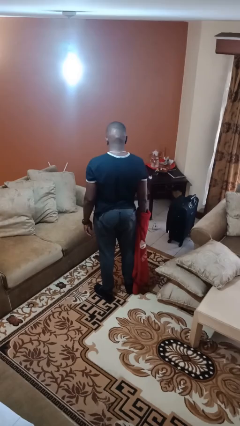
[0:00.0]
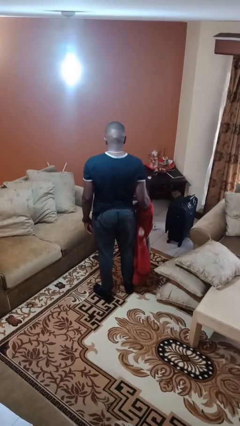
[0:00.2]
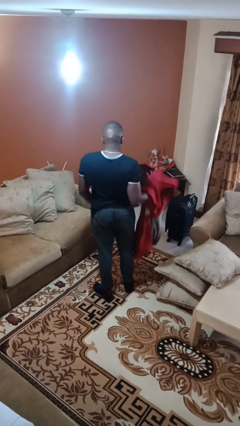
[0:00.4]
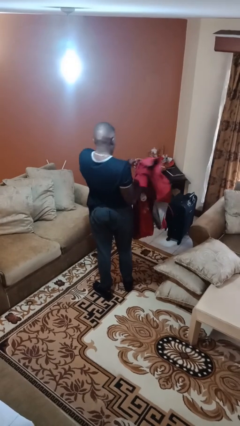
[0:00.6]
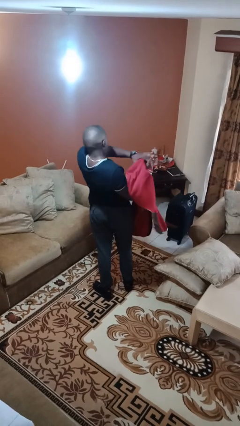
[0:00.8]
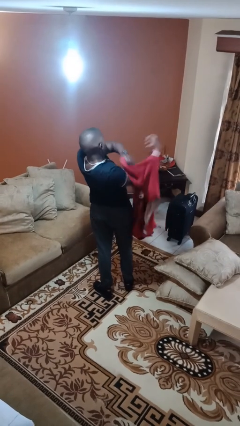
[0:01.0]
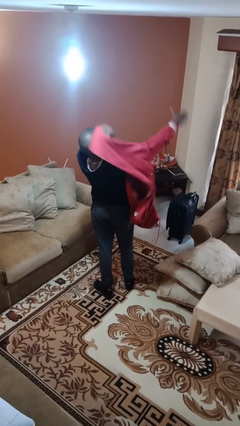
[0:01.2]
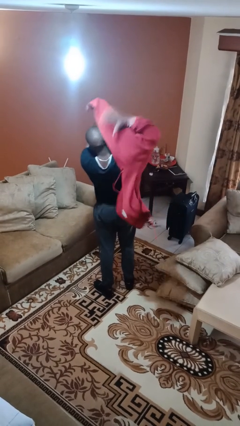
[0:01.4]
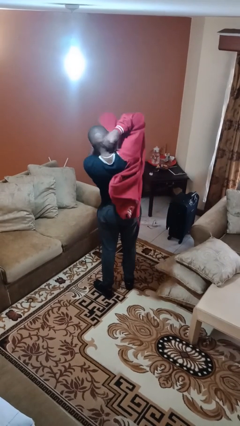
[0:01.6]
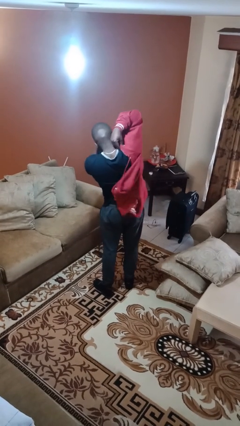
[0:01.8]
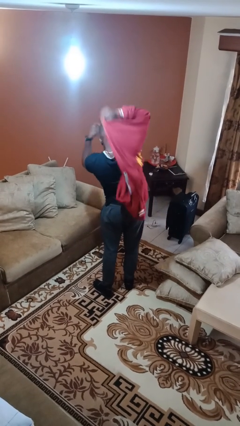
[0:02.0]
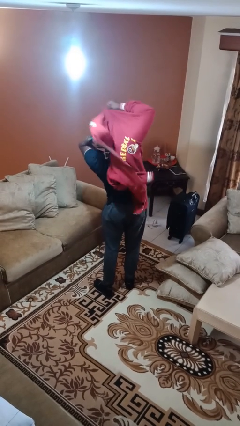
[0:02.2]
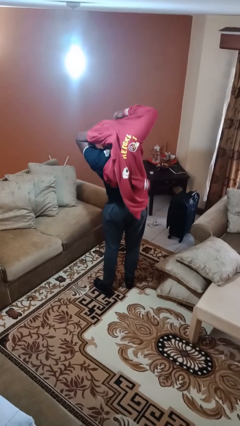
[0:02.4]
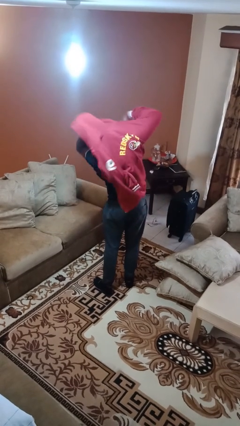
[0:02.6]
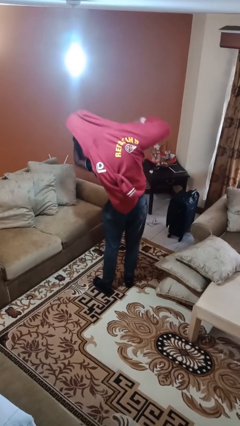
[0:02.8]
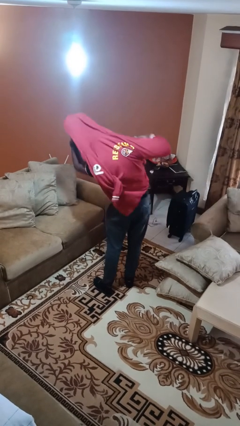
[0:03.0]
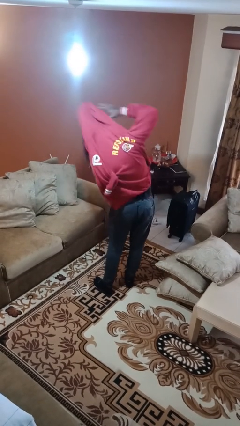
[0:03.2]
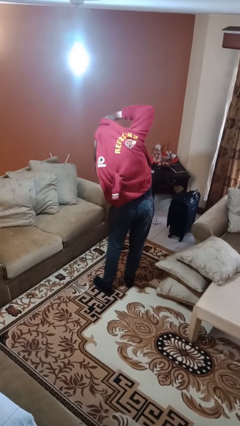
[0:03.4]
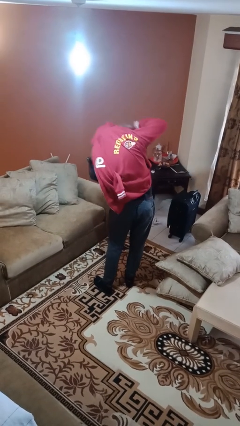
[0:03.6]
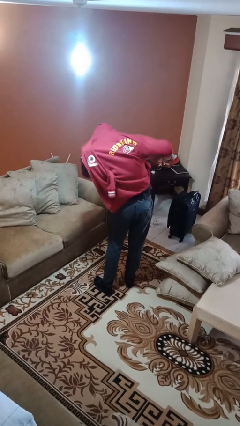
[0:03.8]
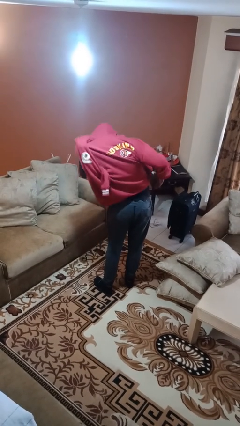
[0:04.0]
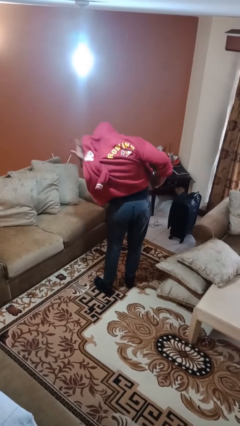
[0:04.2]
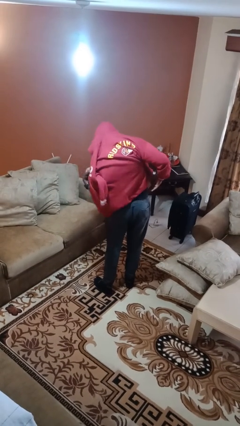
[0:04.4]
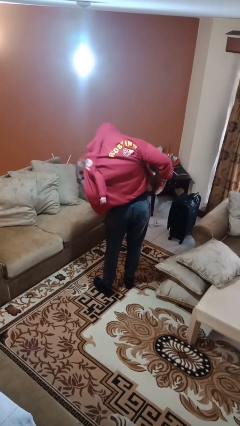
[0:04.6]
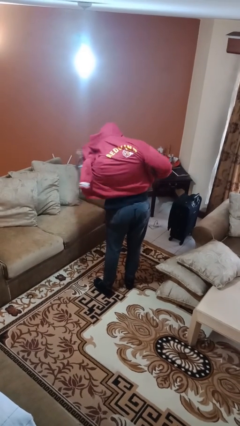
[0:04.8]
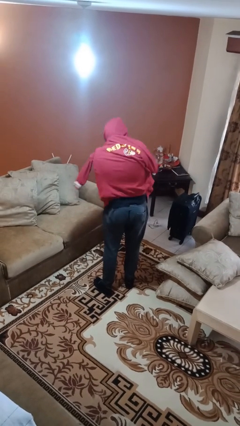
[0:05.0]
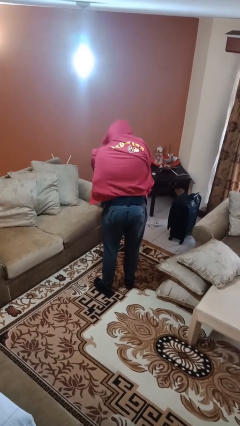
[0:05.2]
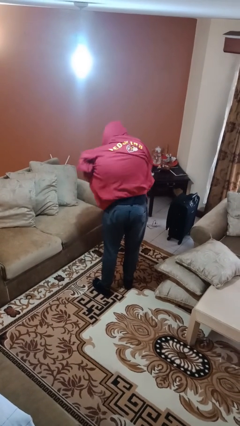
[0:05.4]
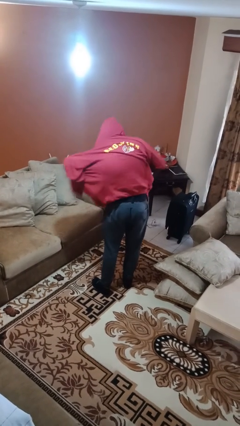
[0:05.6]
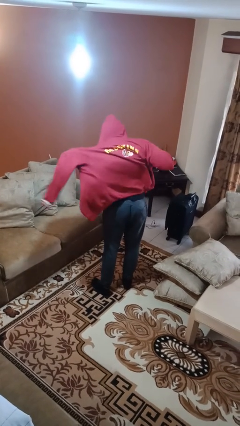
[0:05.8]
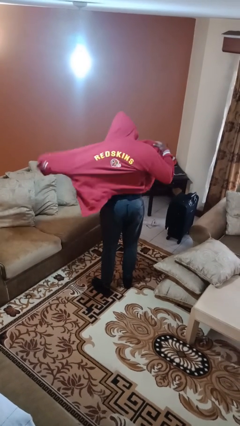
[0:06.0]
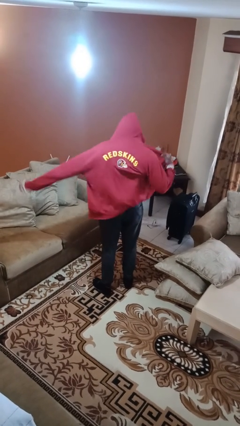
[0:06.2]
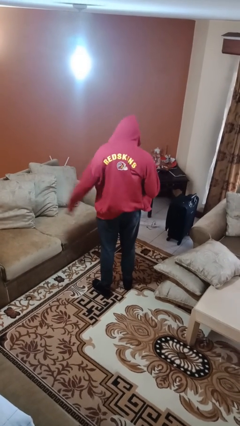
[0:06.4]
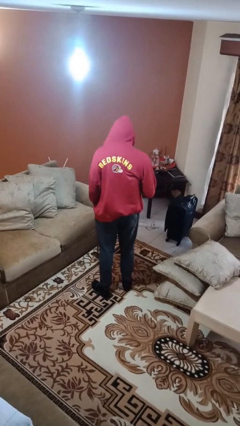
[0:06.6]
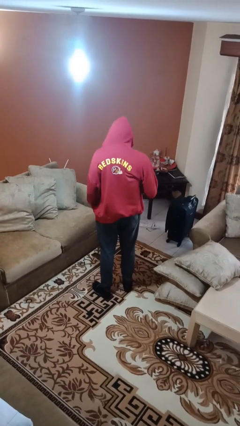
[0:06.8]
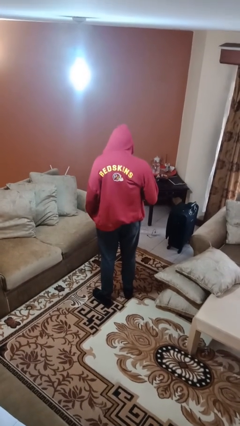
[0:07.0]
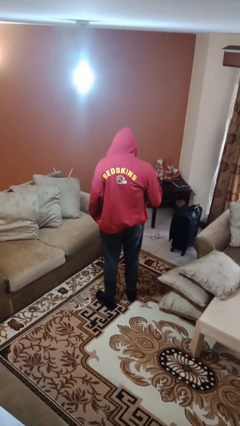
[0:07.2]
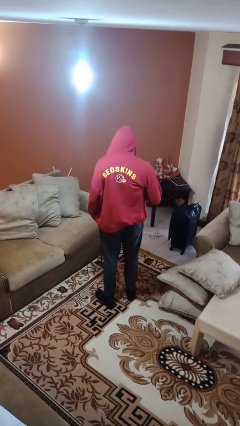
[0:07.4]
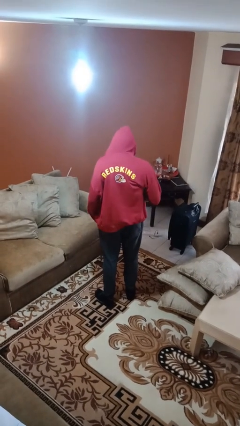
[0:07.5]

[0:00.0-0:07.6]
person puts on hoodie

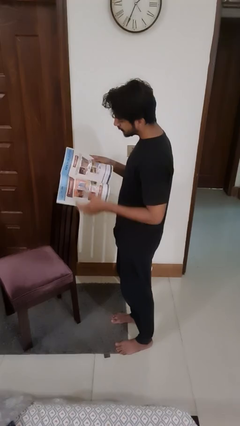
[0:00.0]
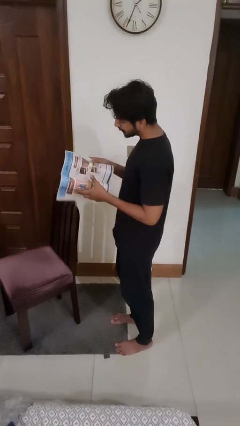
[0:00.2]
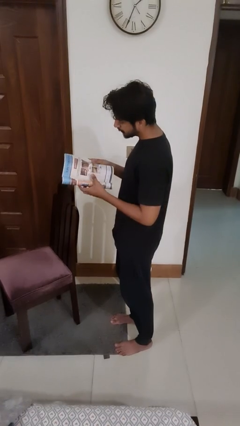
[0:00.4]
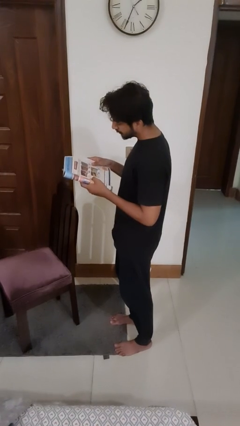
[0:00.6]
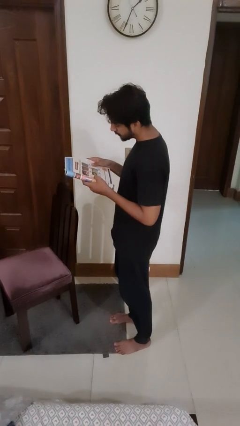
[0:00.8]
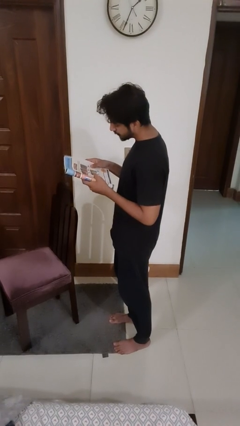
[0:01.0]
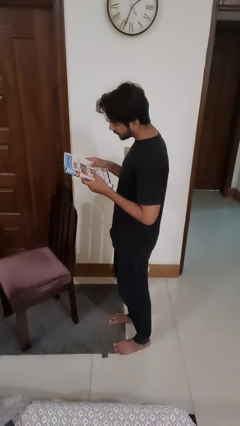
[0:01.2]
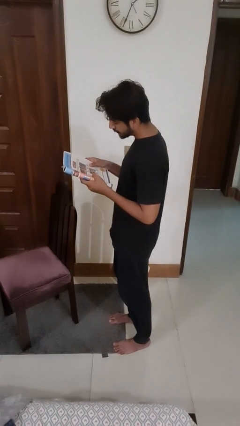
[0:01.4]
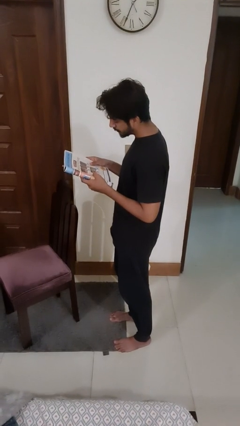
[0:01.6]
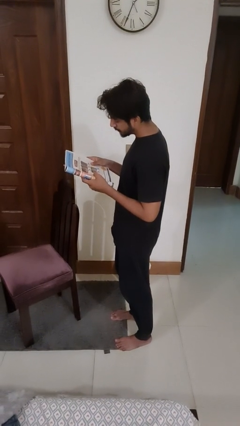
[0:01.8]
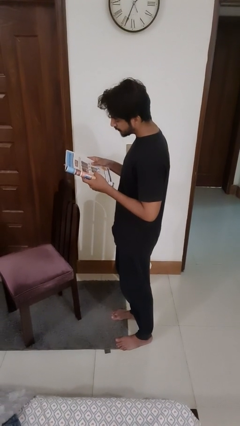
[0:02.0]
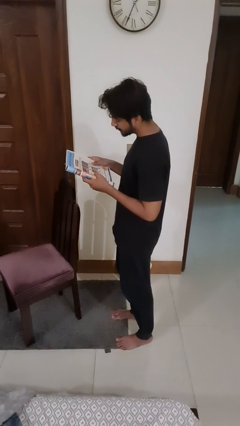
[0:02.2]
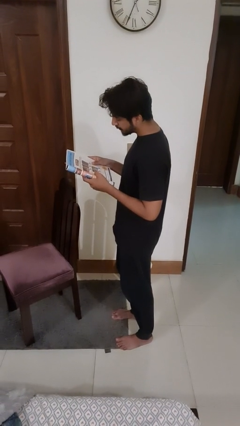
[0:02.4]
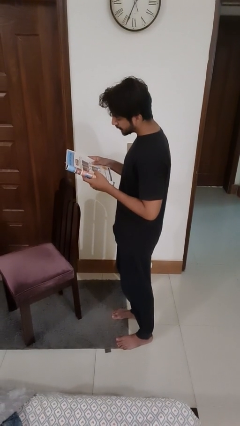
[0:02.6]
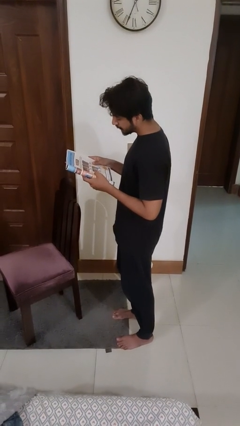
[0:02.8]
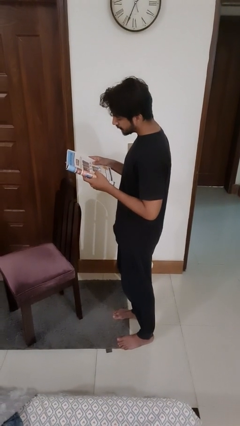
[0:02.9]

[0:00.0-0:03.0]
person reads magazine

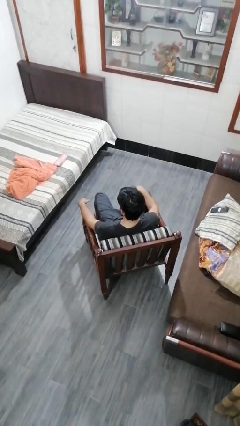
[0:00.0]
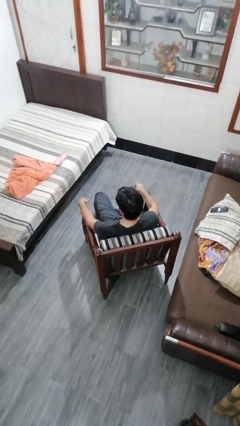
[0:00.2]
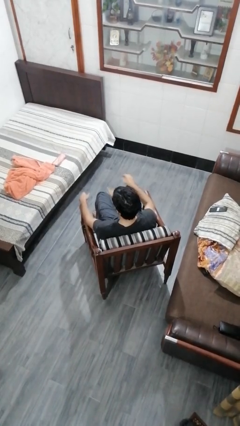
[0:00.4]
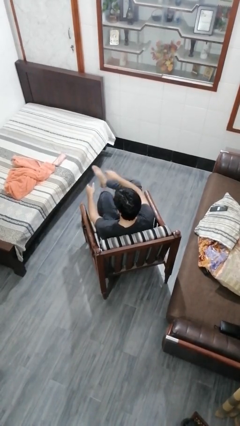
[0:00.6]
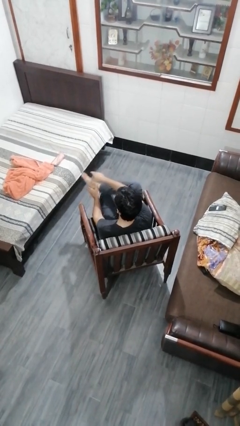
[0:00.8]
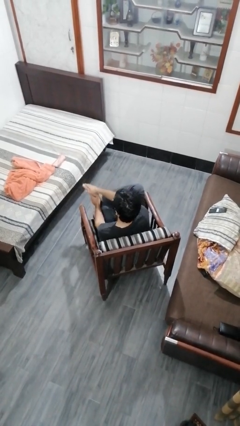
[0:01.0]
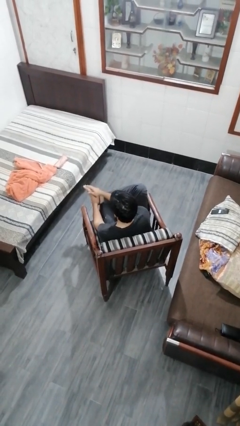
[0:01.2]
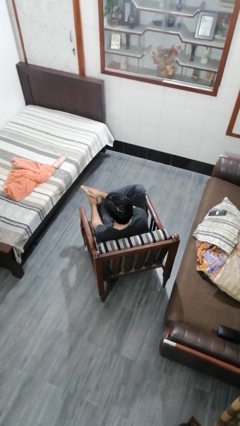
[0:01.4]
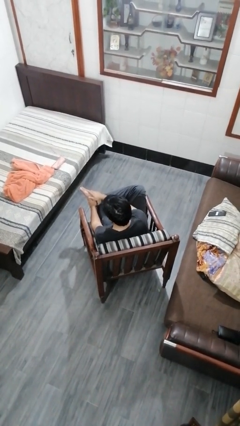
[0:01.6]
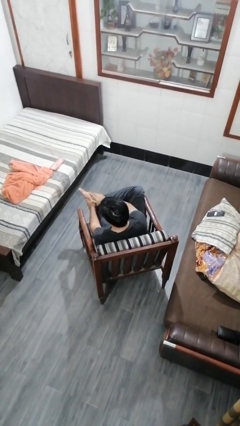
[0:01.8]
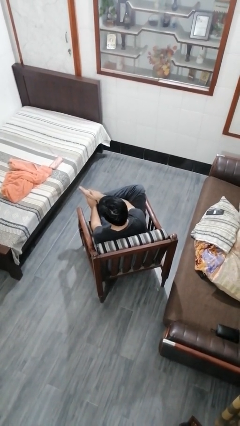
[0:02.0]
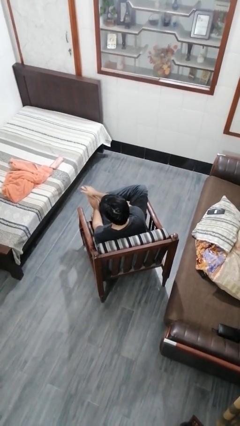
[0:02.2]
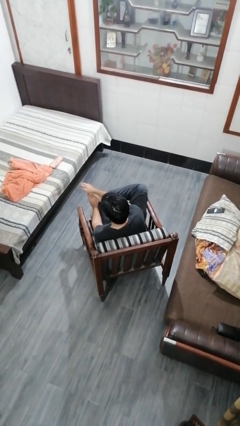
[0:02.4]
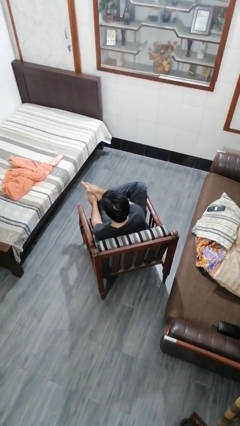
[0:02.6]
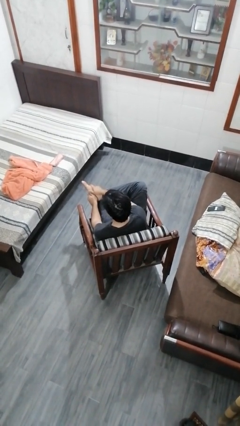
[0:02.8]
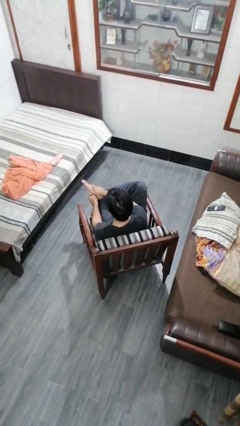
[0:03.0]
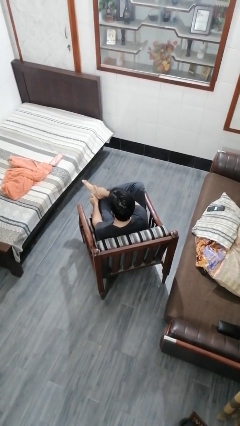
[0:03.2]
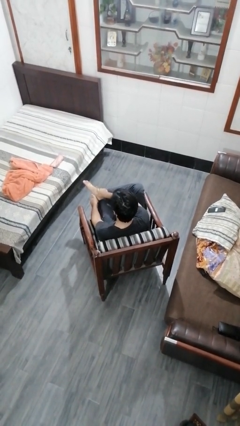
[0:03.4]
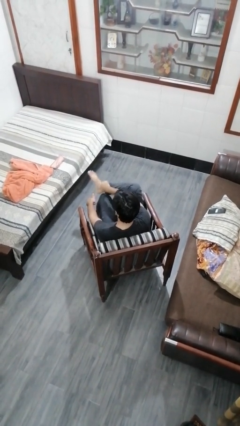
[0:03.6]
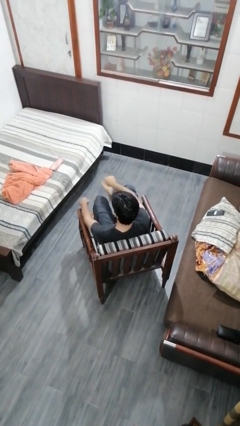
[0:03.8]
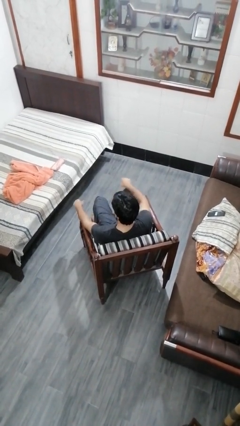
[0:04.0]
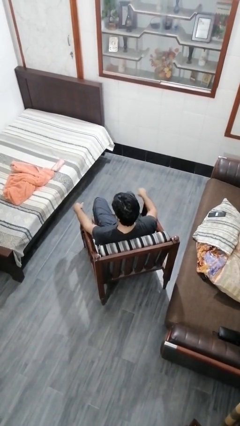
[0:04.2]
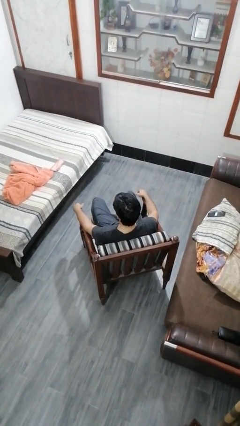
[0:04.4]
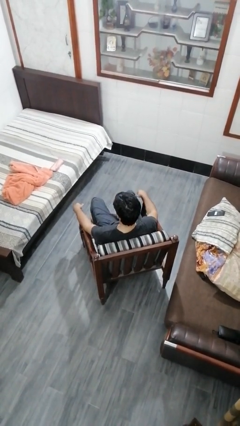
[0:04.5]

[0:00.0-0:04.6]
person rubs foot

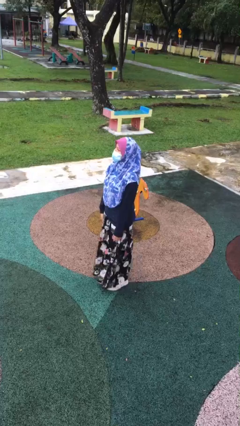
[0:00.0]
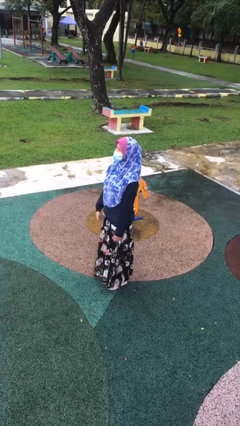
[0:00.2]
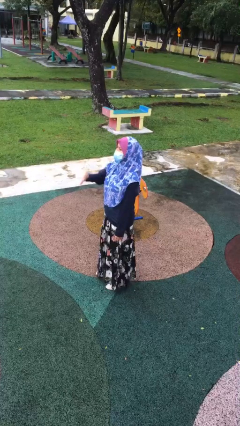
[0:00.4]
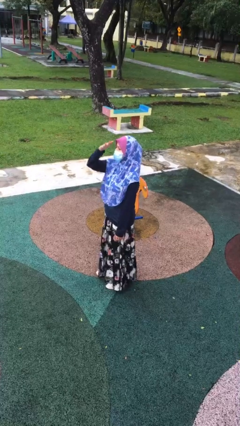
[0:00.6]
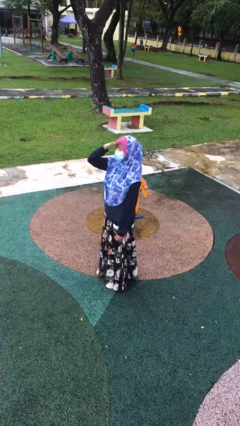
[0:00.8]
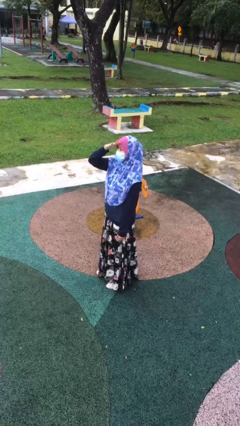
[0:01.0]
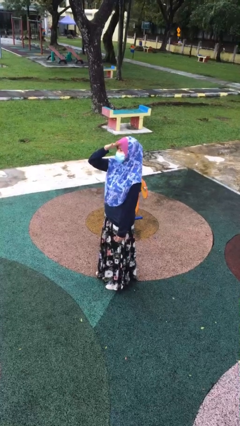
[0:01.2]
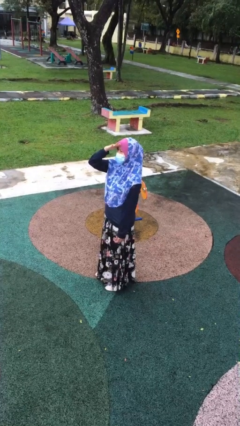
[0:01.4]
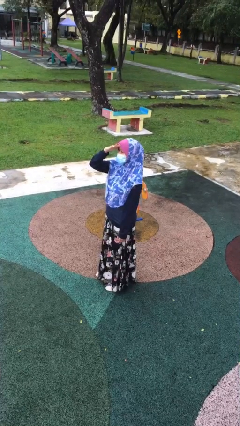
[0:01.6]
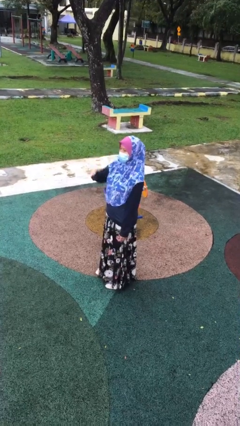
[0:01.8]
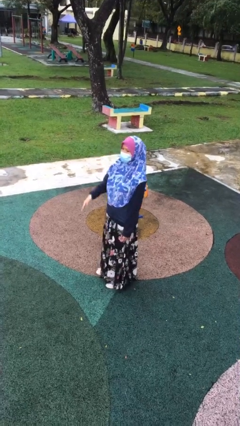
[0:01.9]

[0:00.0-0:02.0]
person salutes

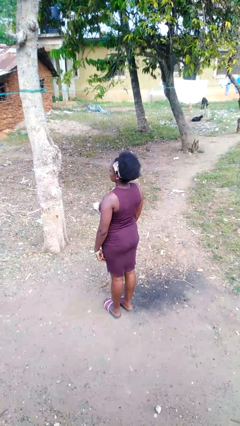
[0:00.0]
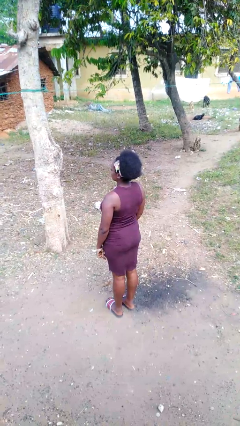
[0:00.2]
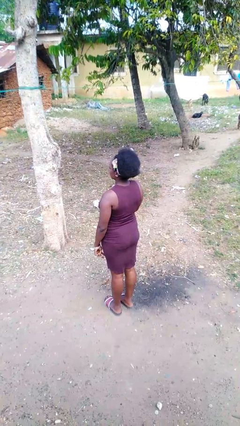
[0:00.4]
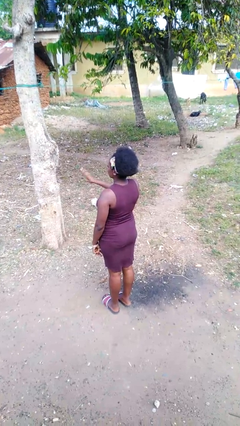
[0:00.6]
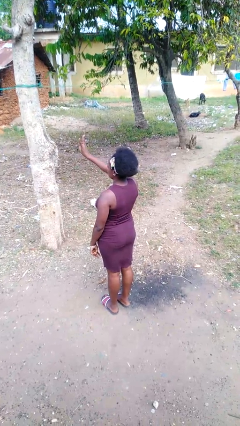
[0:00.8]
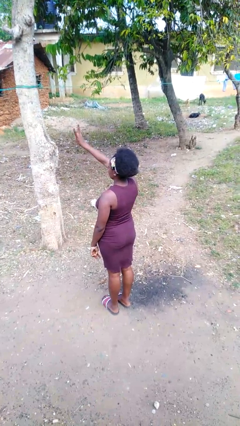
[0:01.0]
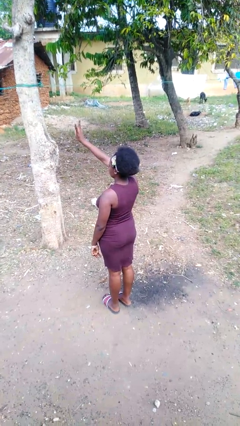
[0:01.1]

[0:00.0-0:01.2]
person gestures number three
